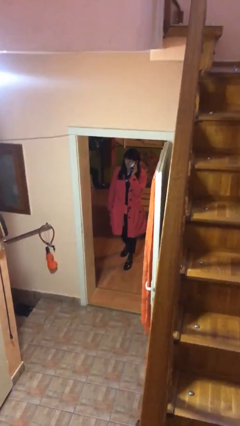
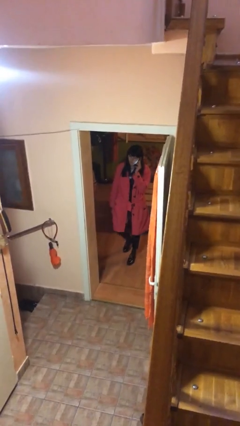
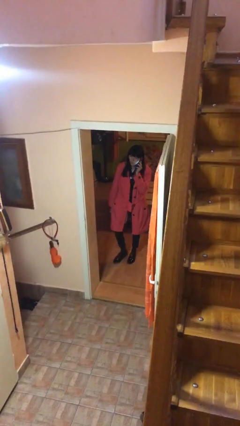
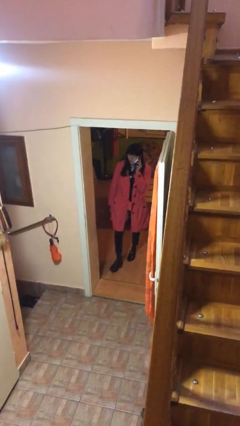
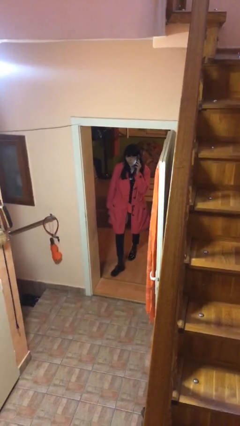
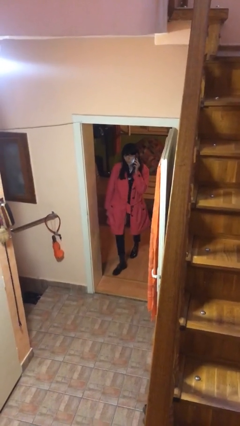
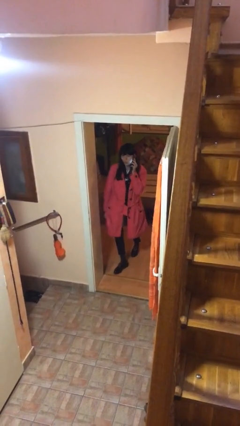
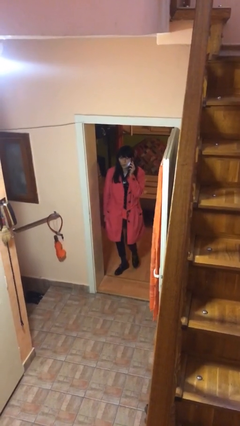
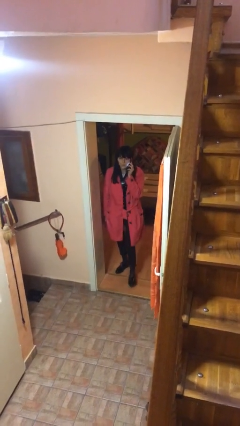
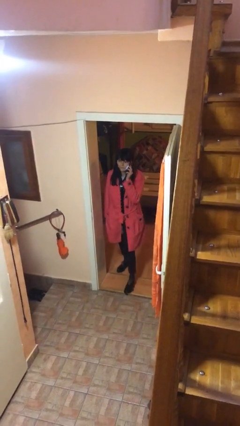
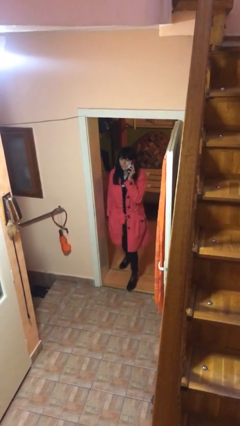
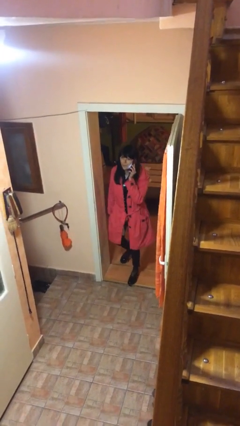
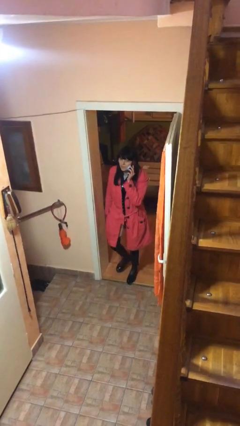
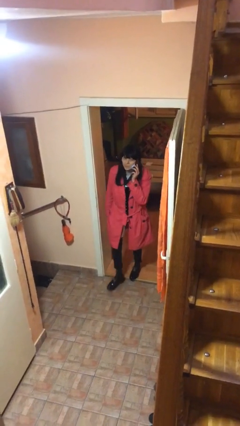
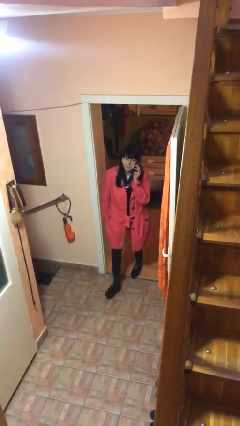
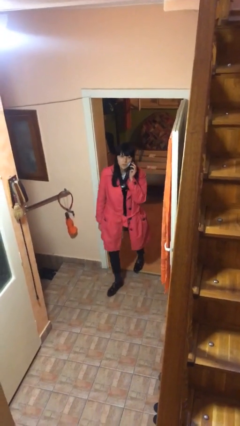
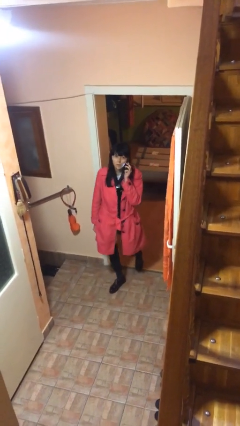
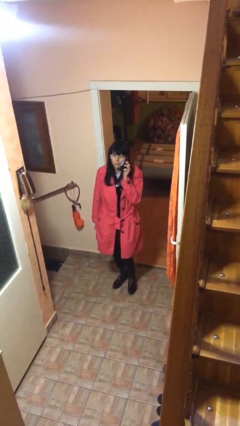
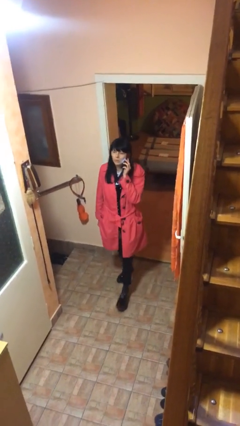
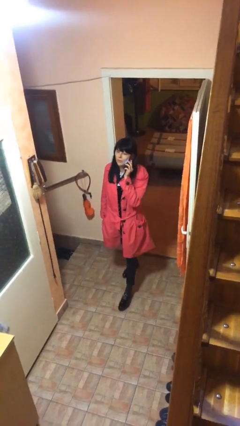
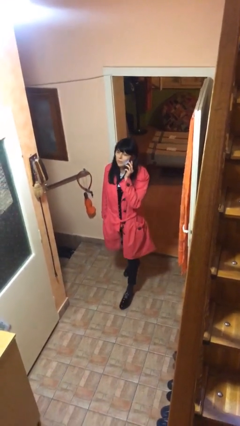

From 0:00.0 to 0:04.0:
person enters scene through structure

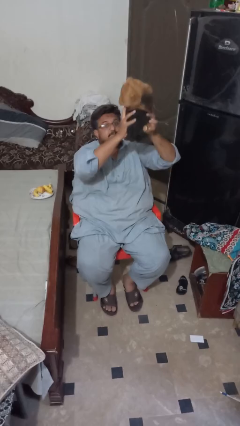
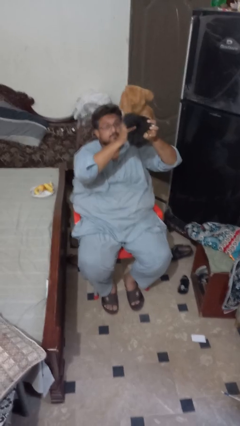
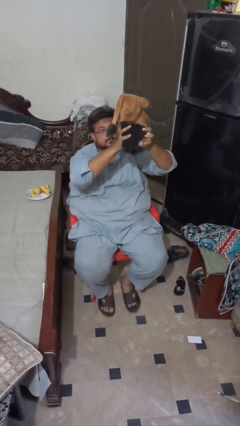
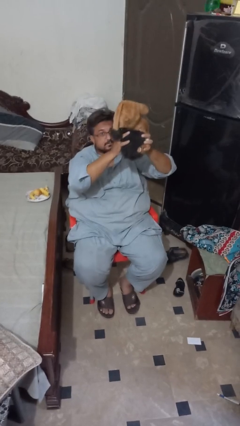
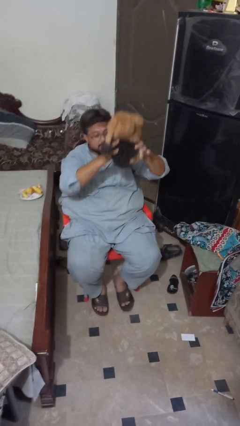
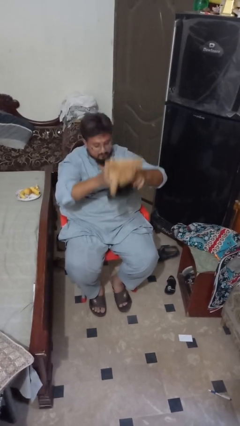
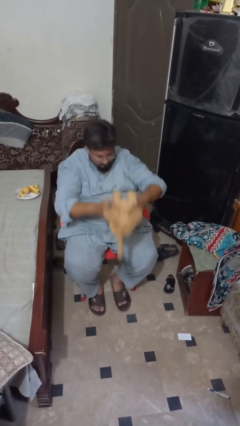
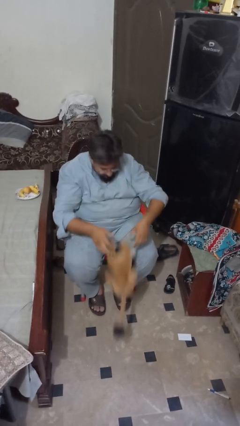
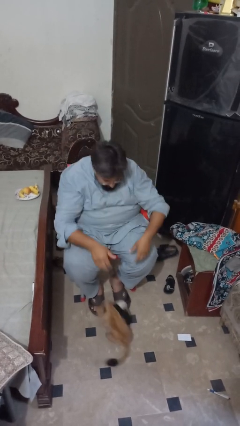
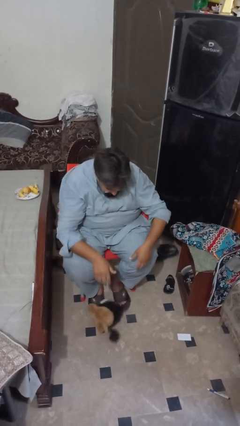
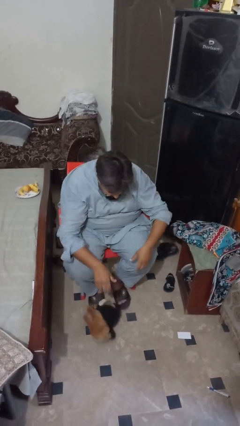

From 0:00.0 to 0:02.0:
person catches dropped object

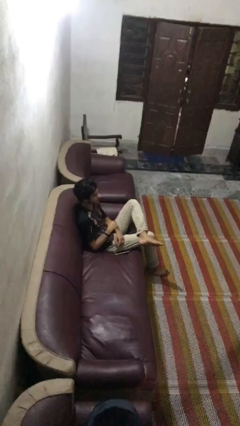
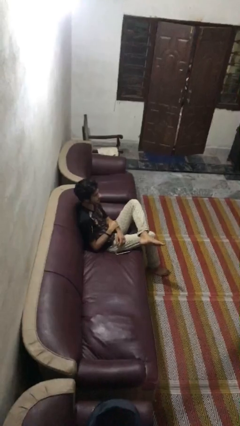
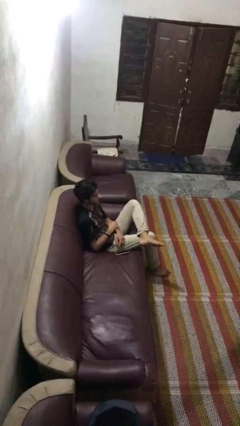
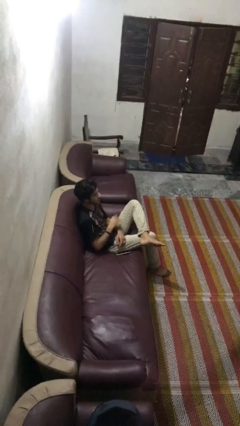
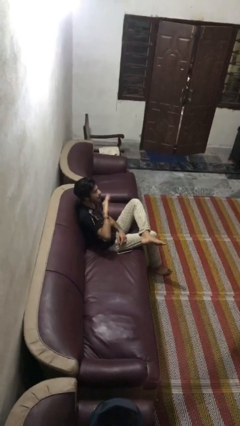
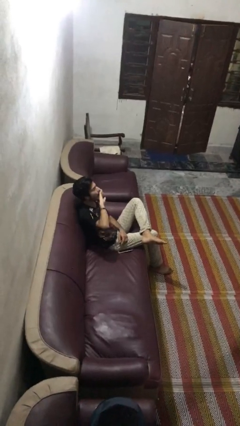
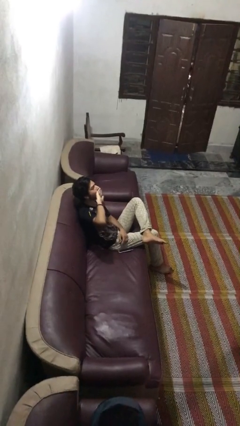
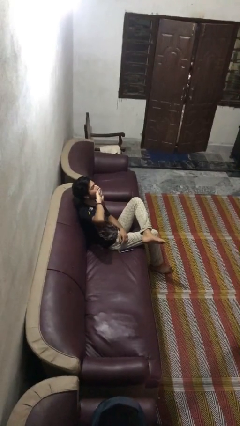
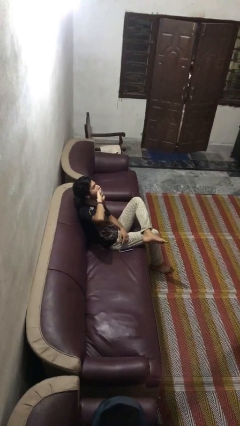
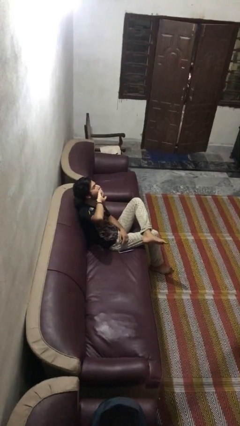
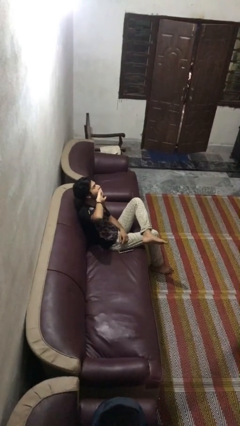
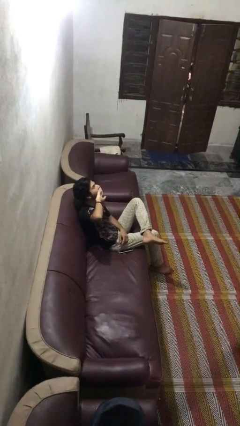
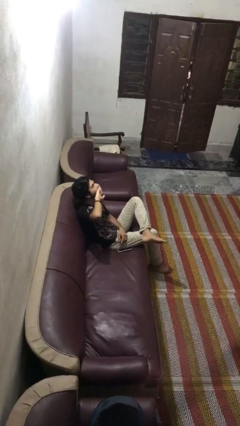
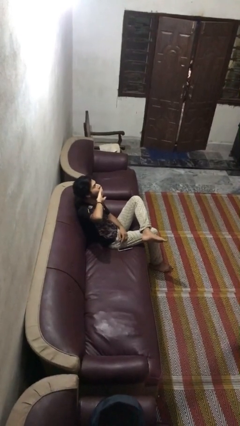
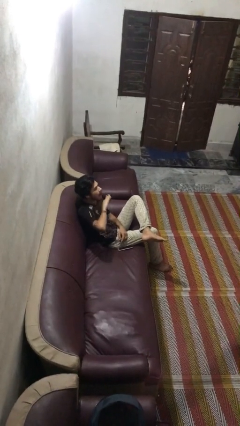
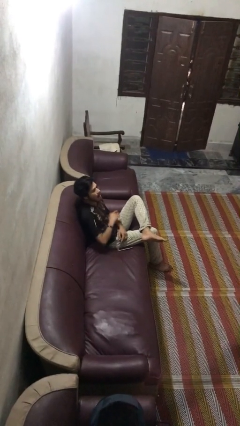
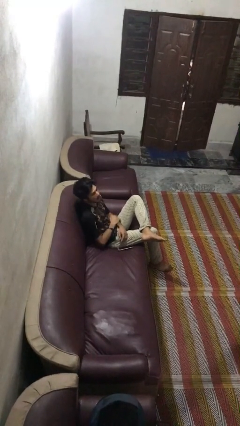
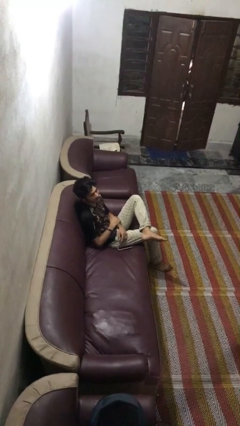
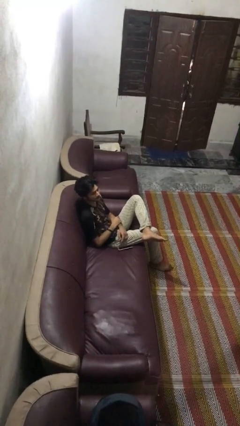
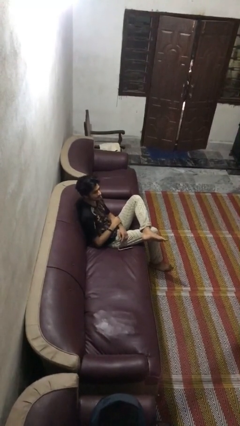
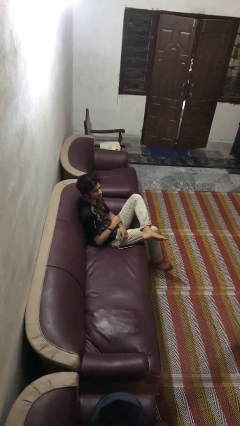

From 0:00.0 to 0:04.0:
person yawns

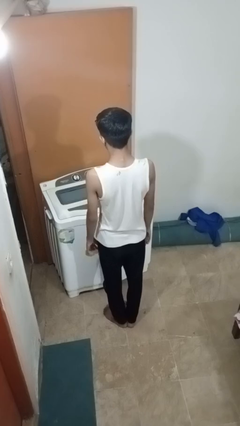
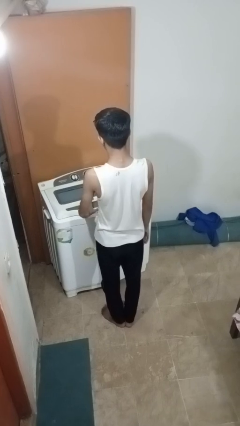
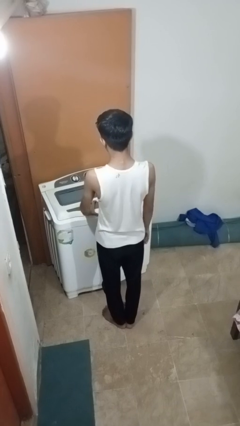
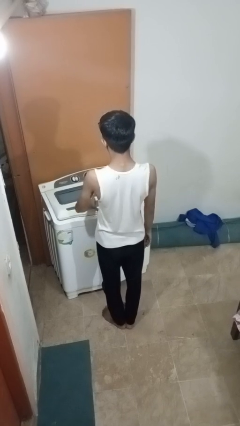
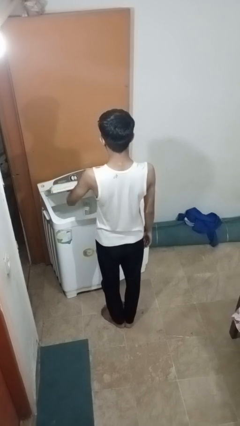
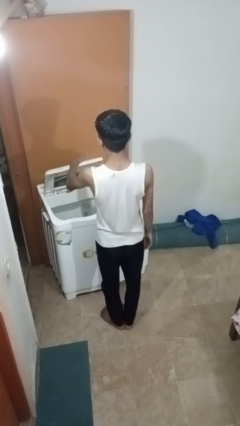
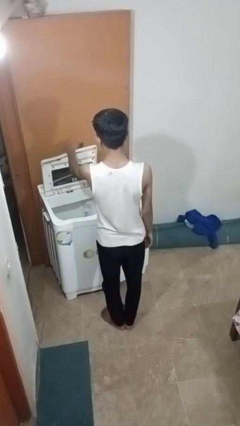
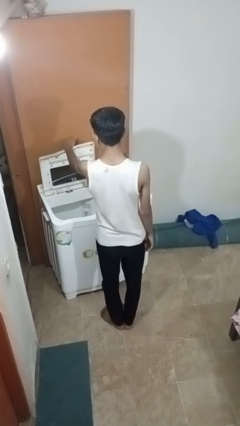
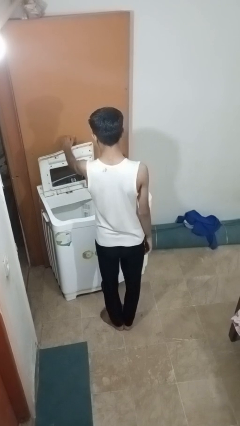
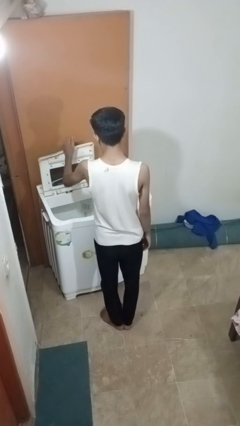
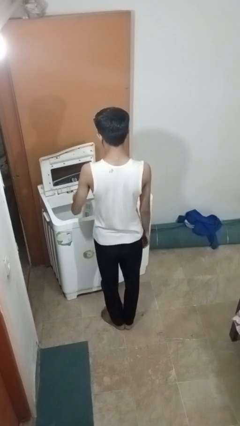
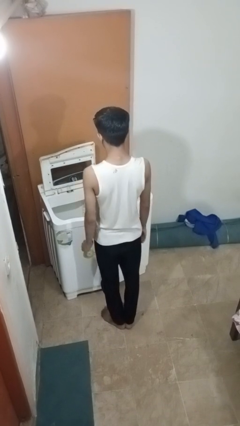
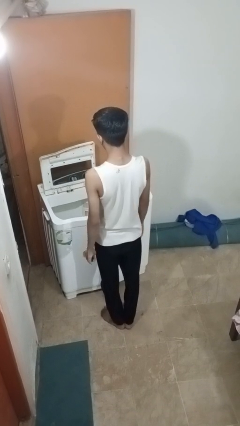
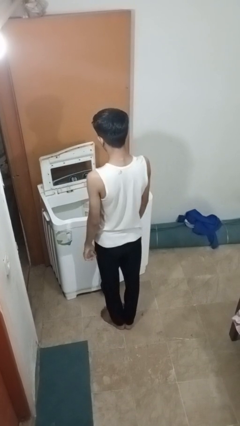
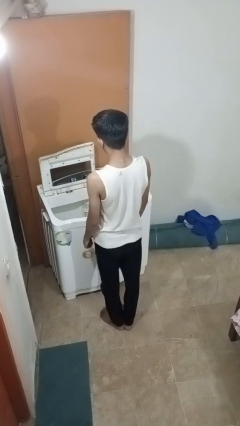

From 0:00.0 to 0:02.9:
person opens clothes washer

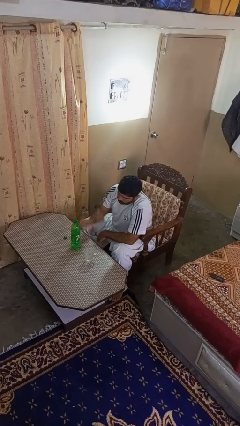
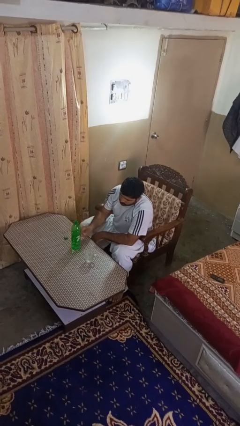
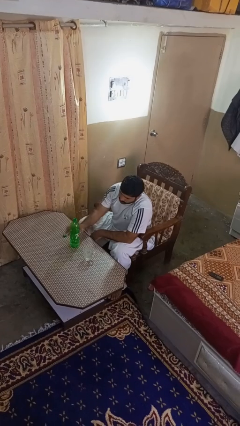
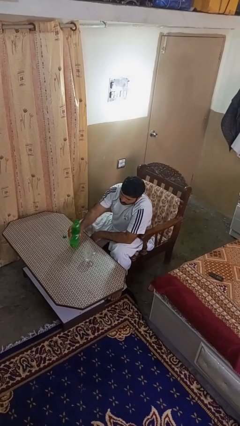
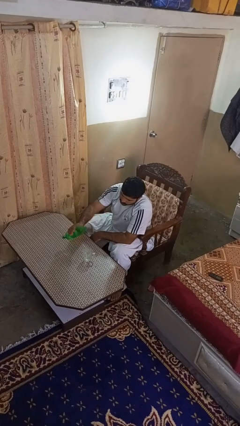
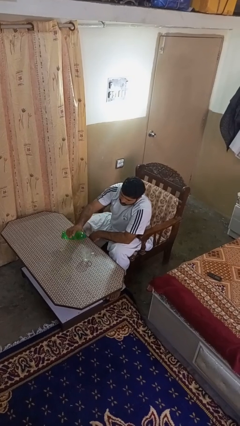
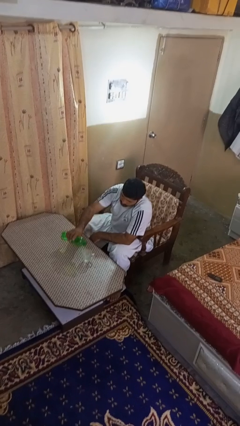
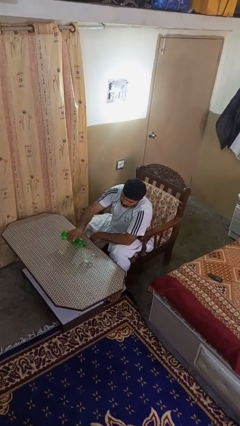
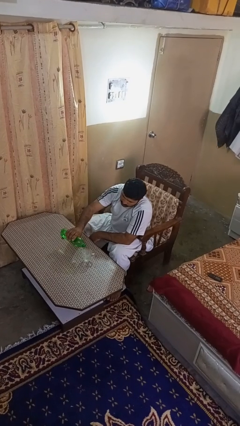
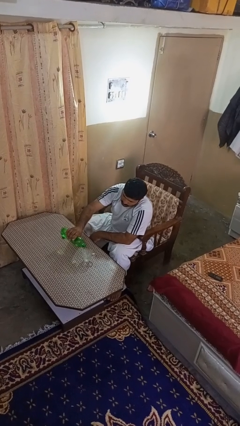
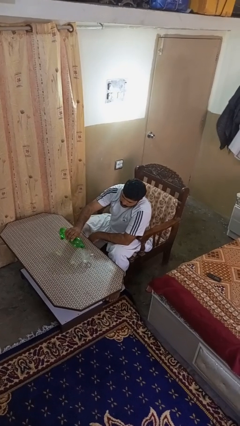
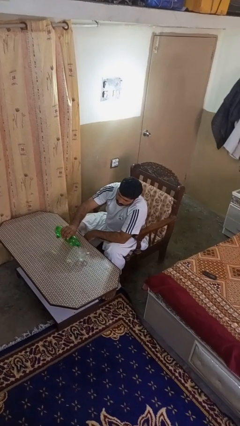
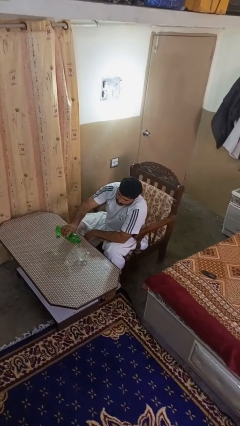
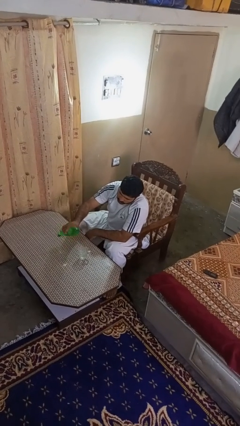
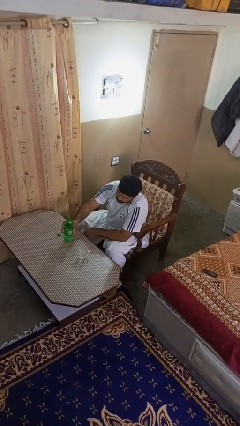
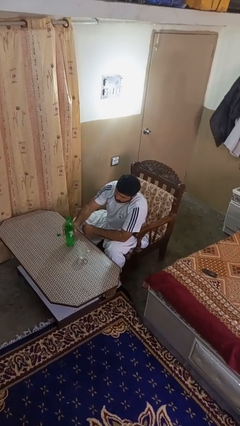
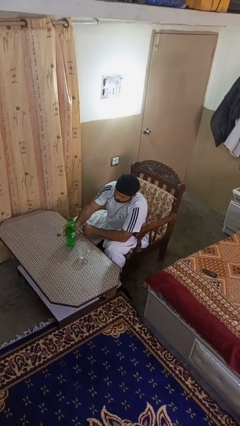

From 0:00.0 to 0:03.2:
person pours liquid into cup

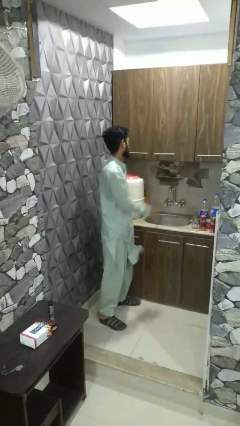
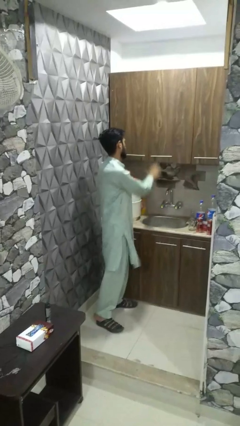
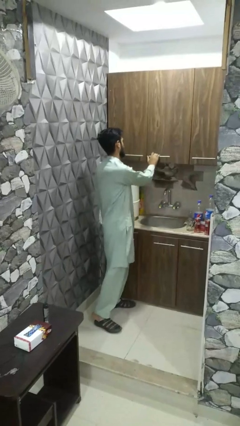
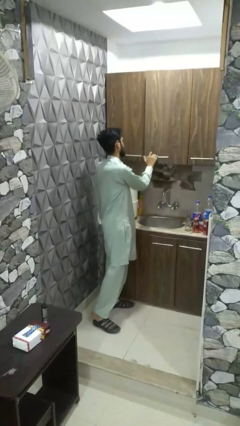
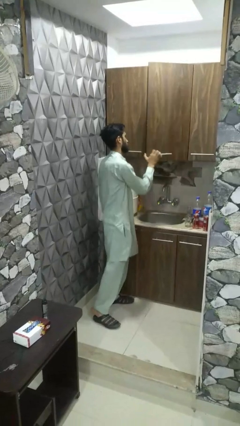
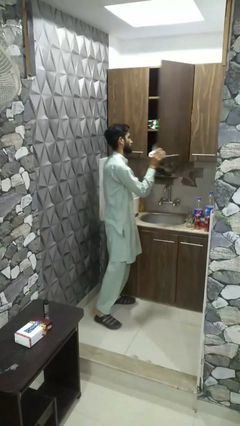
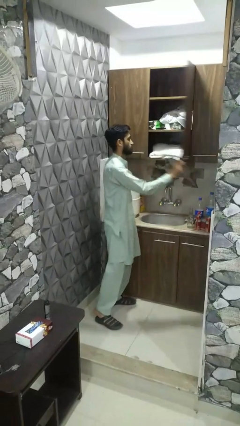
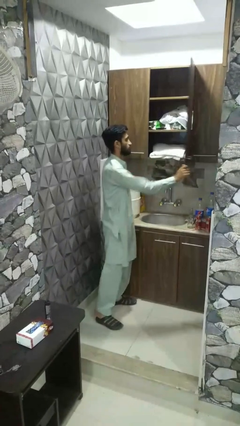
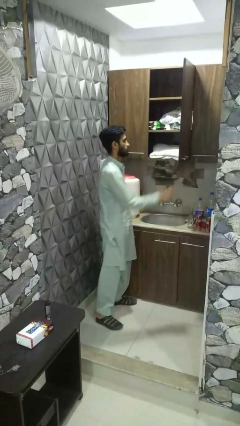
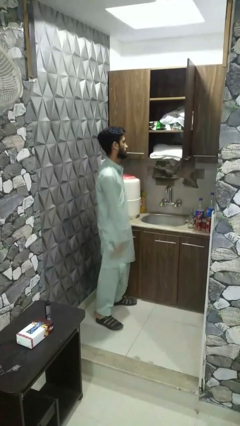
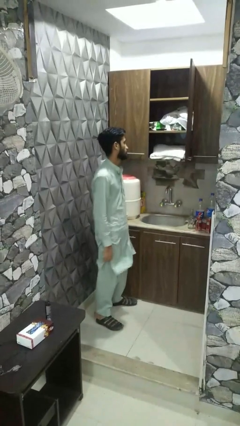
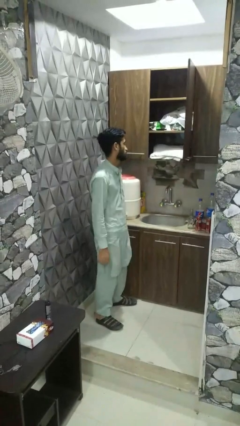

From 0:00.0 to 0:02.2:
person opens dresser drawer
